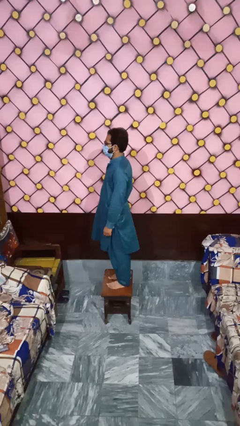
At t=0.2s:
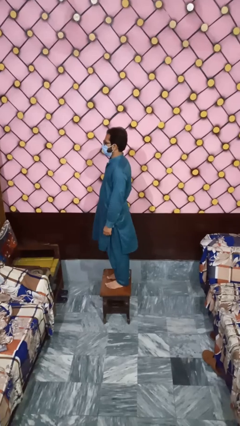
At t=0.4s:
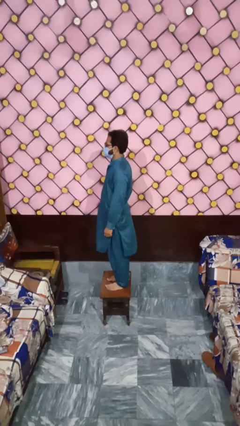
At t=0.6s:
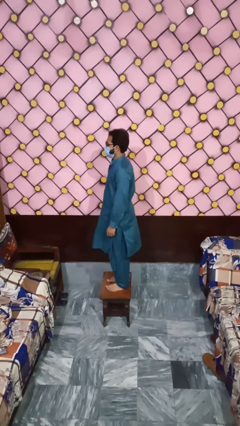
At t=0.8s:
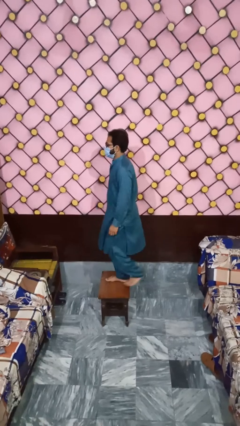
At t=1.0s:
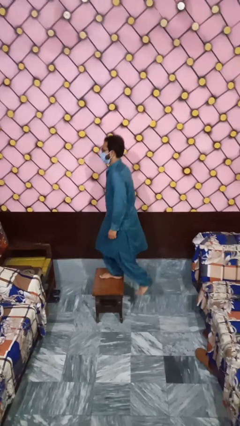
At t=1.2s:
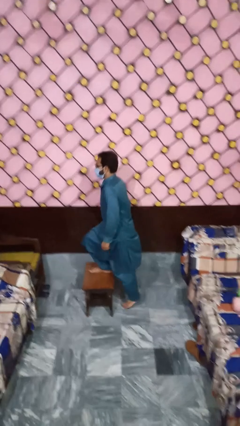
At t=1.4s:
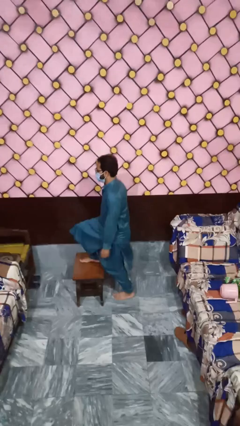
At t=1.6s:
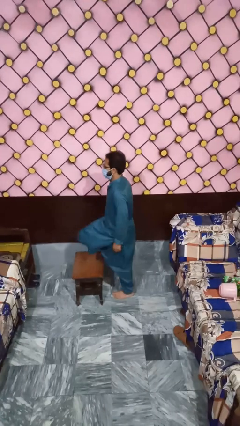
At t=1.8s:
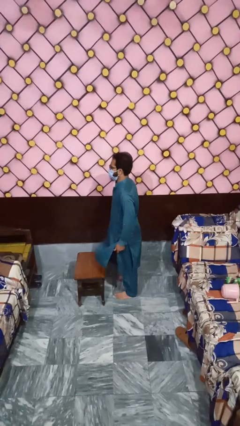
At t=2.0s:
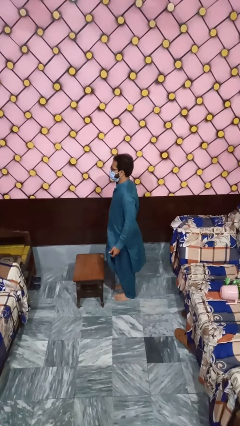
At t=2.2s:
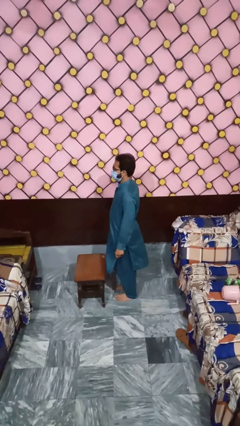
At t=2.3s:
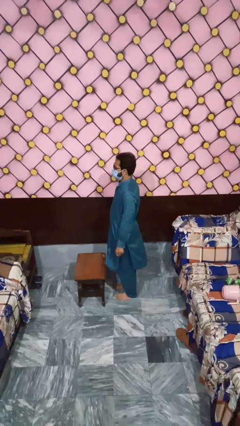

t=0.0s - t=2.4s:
person climbs off table

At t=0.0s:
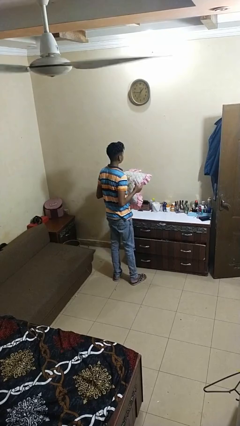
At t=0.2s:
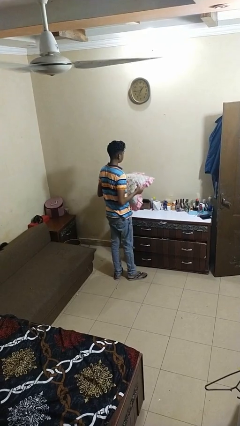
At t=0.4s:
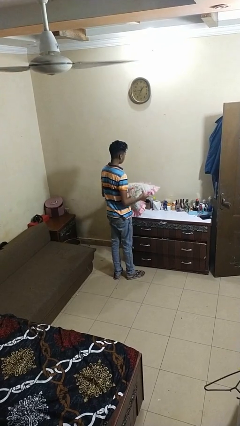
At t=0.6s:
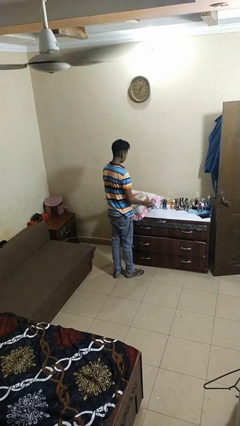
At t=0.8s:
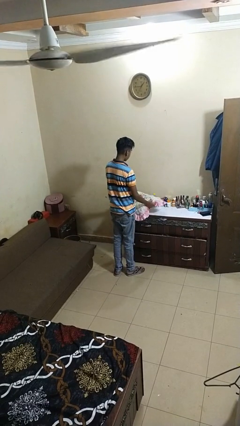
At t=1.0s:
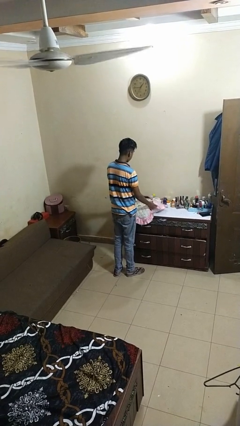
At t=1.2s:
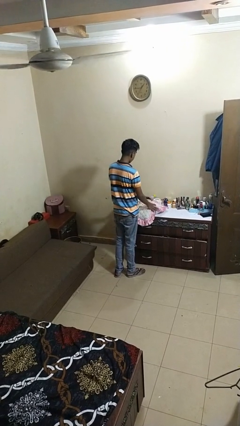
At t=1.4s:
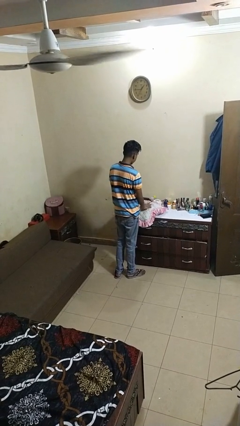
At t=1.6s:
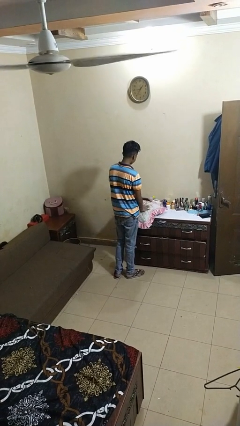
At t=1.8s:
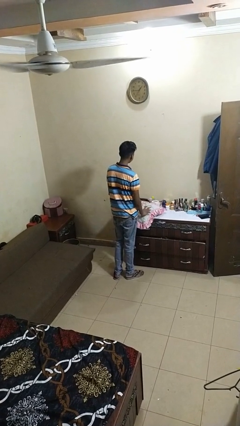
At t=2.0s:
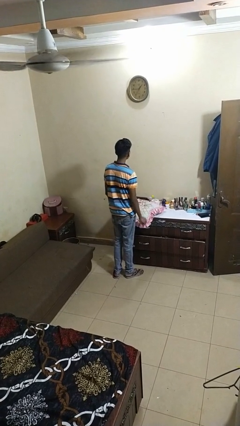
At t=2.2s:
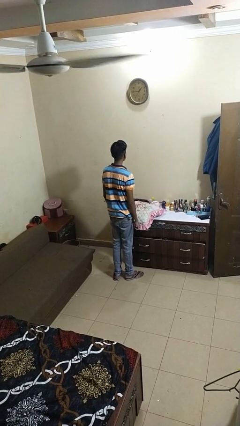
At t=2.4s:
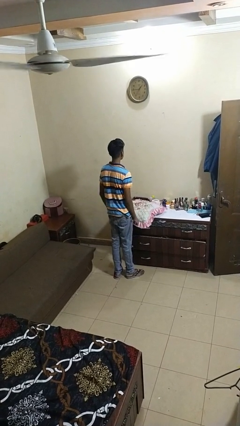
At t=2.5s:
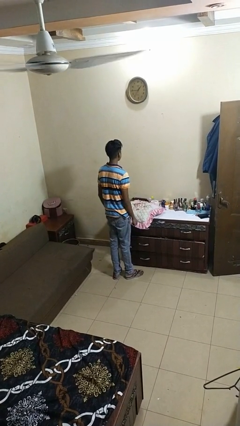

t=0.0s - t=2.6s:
person puts down object on countertop

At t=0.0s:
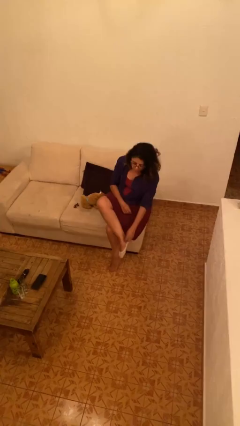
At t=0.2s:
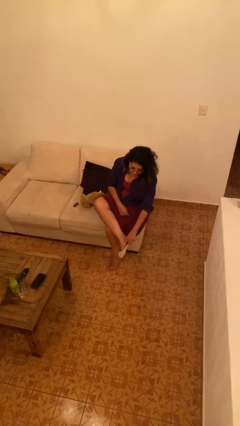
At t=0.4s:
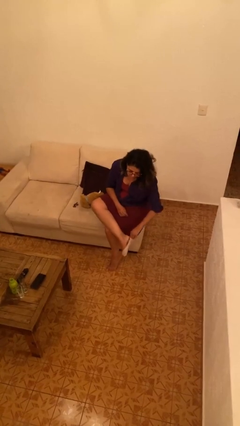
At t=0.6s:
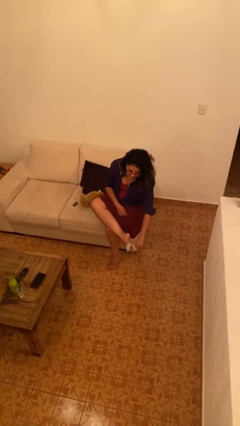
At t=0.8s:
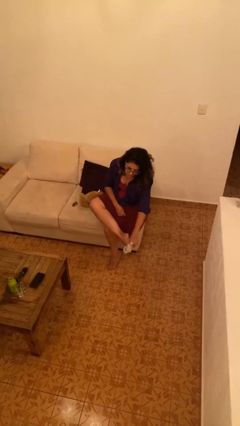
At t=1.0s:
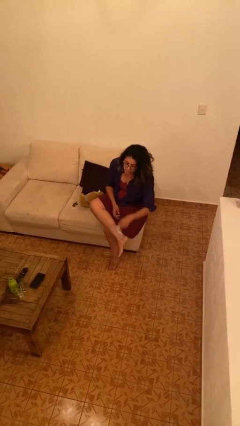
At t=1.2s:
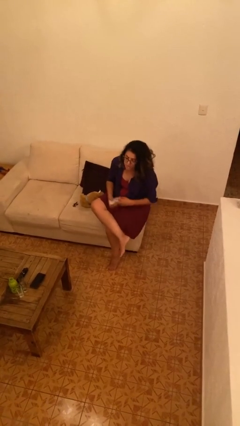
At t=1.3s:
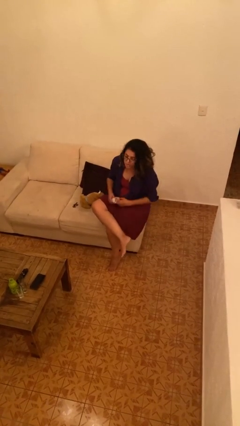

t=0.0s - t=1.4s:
person takes off socks

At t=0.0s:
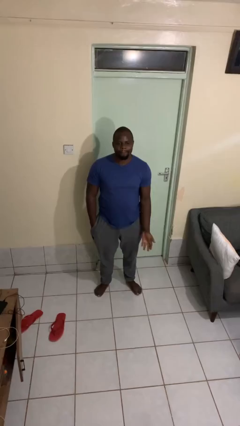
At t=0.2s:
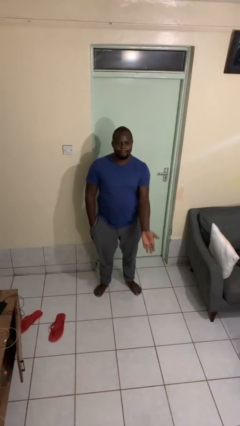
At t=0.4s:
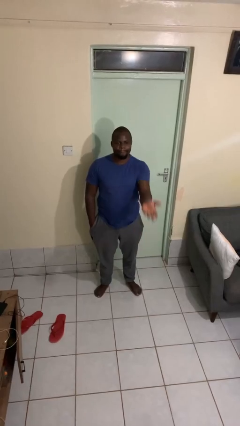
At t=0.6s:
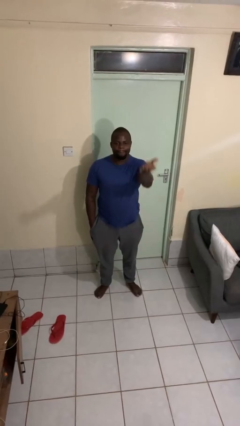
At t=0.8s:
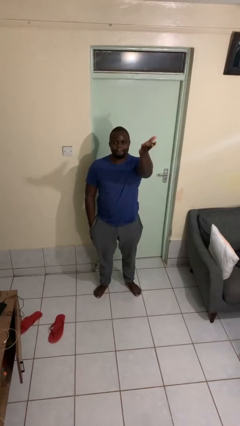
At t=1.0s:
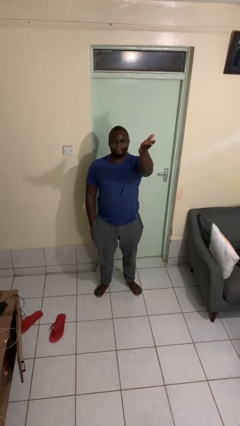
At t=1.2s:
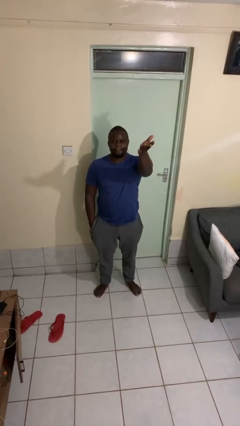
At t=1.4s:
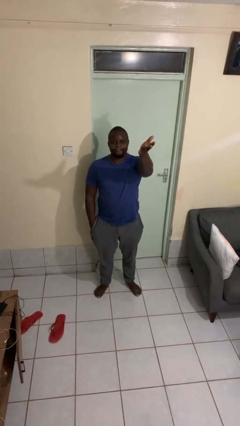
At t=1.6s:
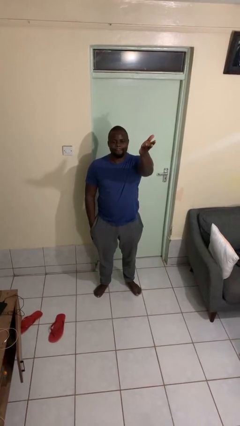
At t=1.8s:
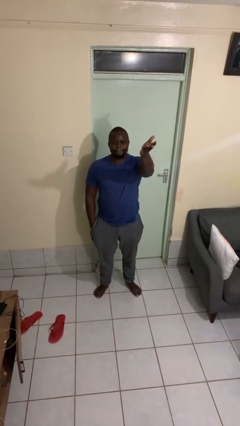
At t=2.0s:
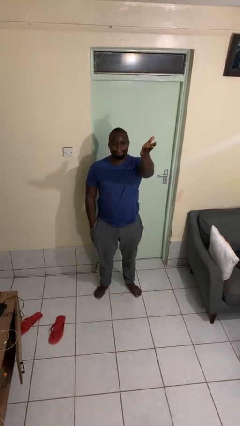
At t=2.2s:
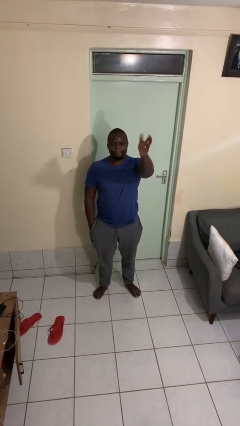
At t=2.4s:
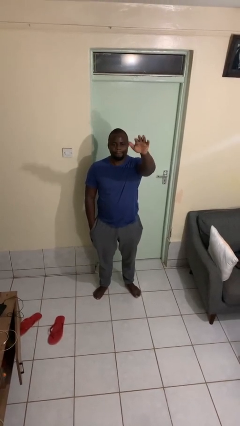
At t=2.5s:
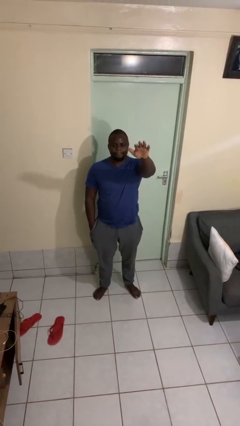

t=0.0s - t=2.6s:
person gestures swipe up

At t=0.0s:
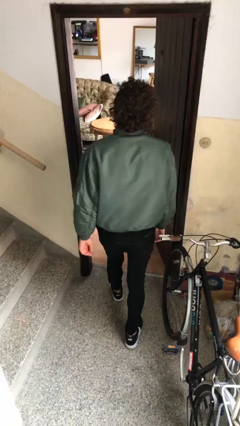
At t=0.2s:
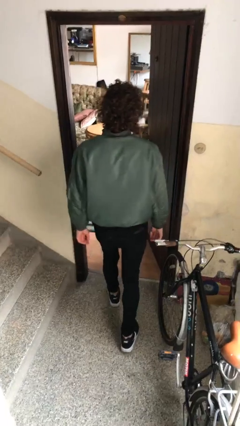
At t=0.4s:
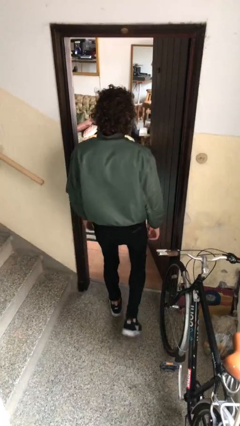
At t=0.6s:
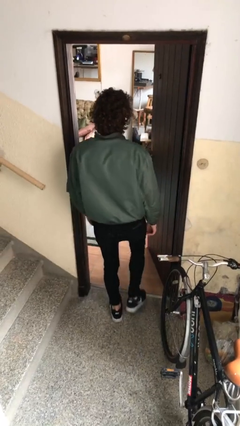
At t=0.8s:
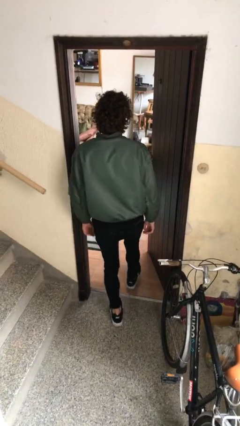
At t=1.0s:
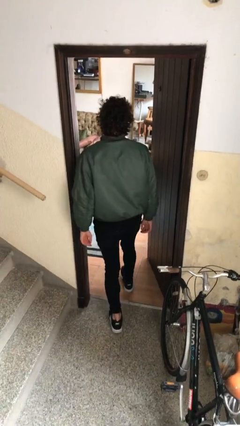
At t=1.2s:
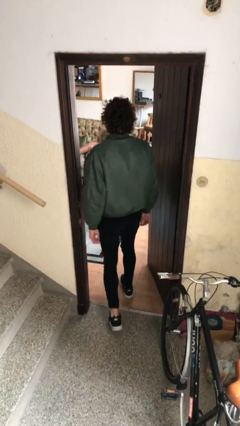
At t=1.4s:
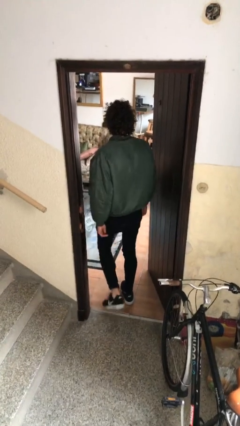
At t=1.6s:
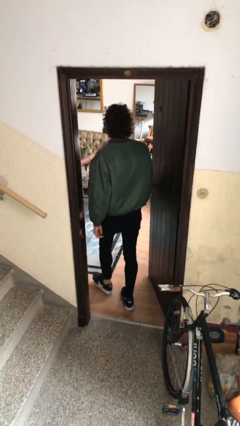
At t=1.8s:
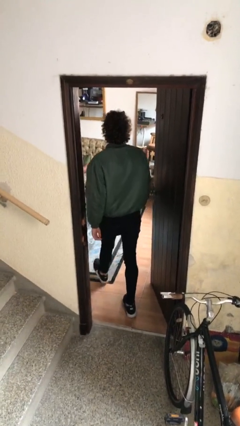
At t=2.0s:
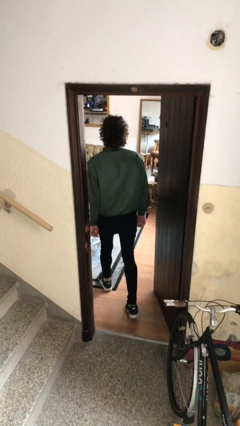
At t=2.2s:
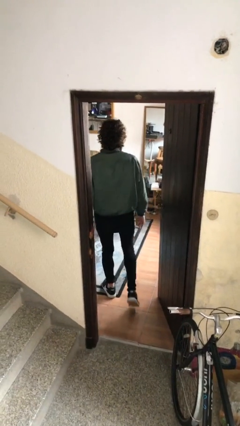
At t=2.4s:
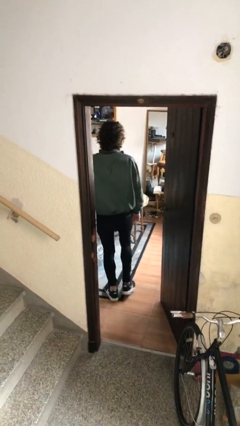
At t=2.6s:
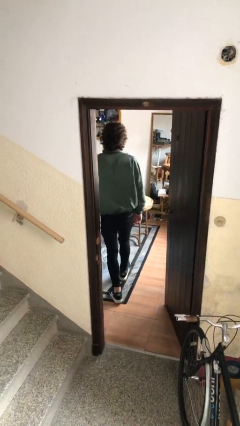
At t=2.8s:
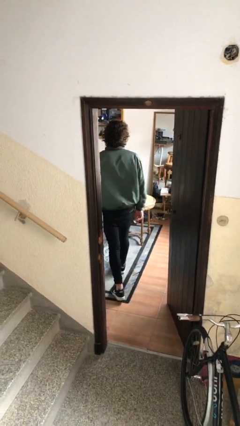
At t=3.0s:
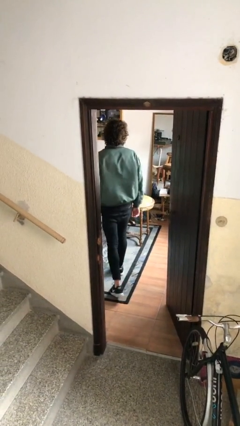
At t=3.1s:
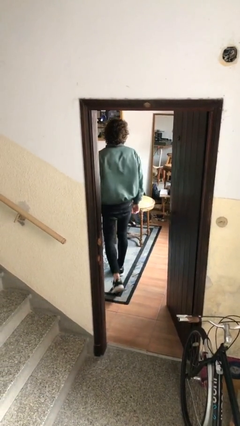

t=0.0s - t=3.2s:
person exits scene through structure

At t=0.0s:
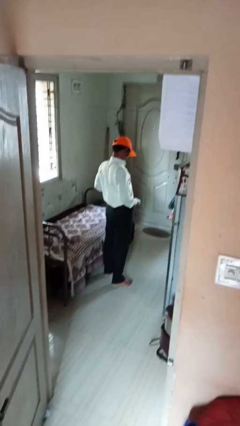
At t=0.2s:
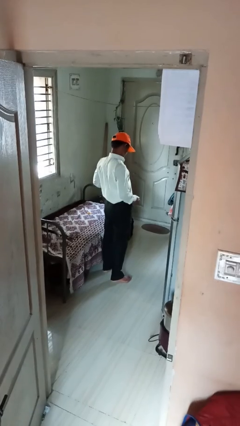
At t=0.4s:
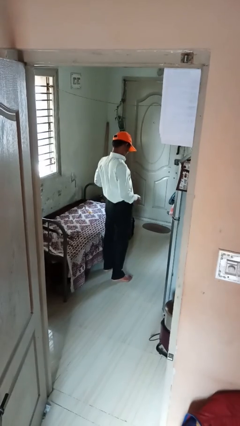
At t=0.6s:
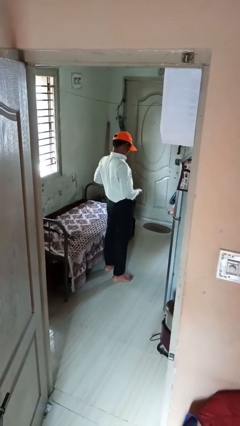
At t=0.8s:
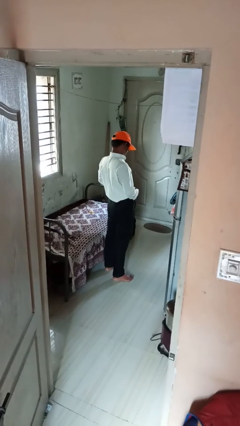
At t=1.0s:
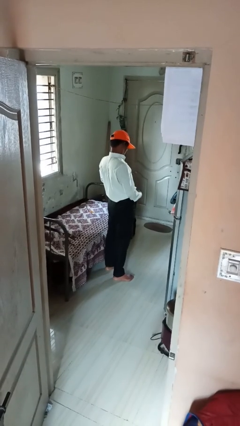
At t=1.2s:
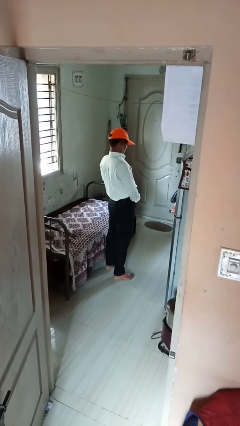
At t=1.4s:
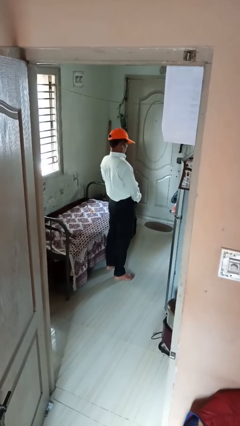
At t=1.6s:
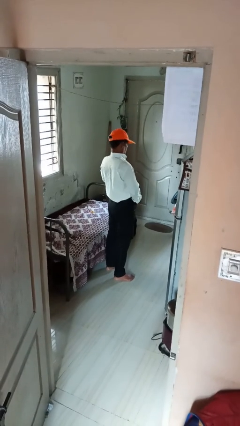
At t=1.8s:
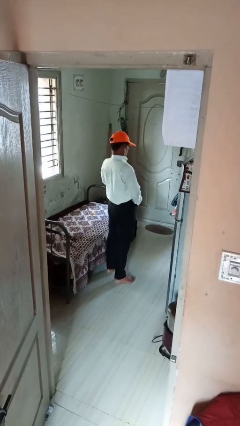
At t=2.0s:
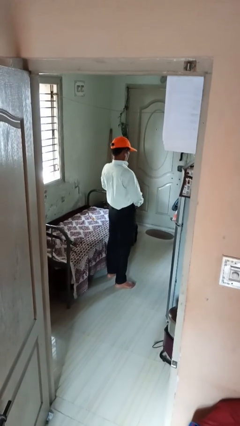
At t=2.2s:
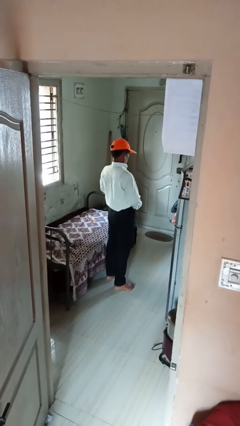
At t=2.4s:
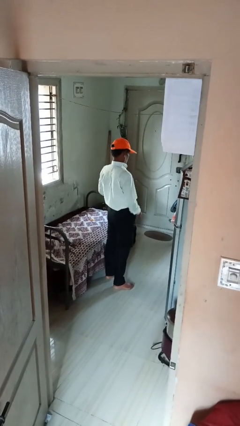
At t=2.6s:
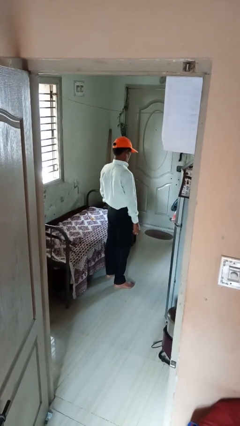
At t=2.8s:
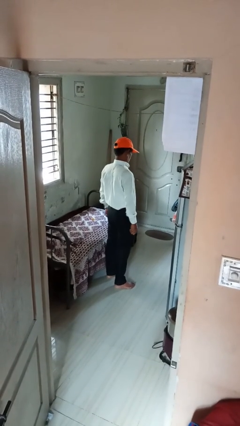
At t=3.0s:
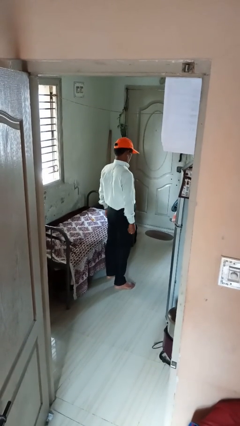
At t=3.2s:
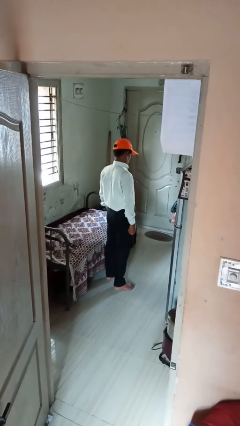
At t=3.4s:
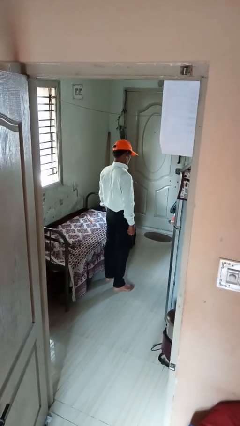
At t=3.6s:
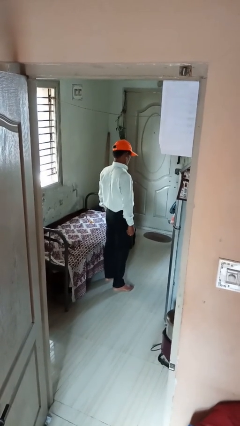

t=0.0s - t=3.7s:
person hikes up pants

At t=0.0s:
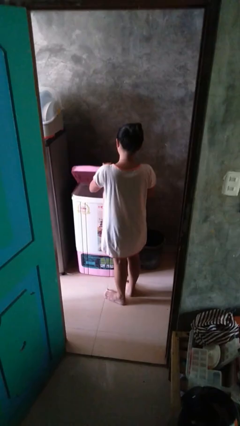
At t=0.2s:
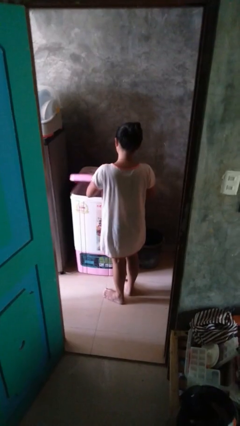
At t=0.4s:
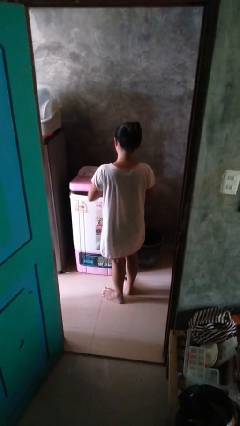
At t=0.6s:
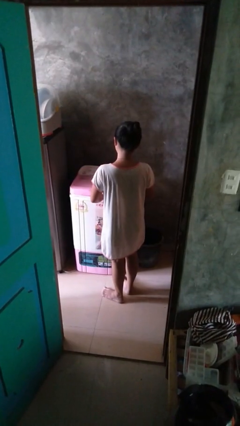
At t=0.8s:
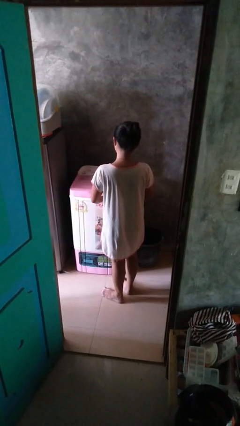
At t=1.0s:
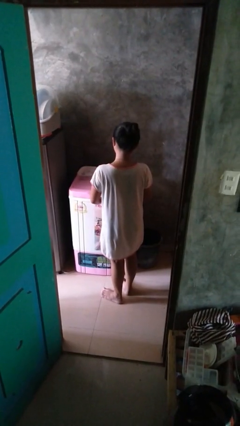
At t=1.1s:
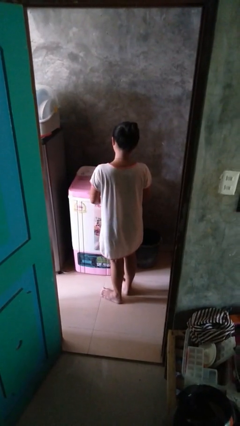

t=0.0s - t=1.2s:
person closes clothes washer
